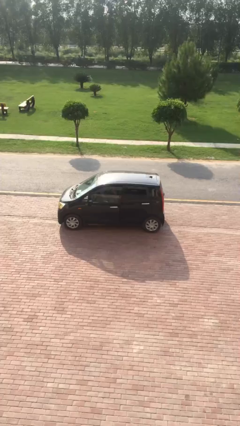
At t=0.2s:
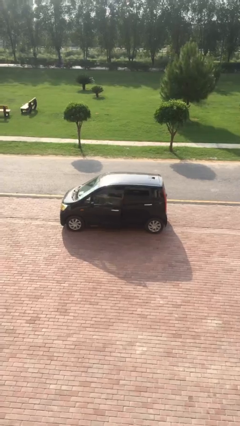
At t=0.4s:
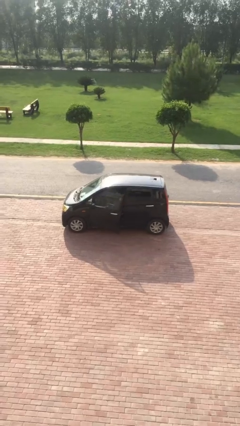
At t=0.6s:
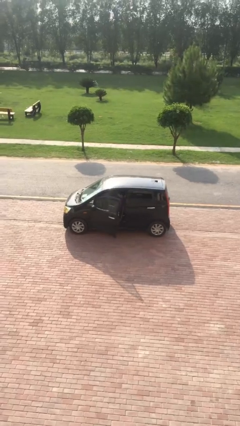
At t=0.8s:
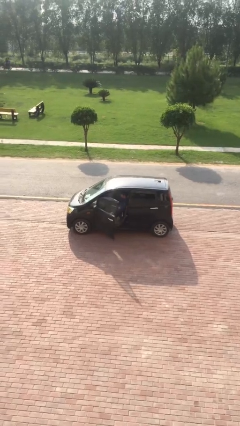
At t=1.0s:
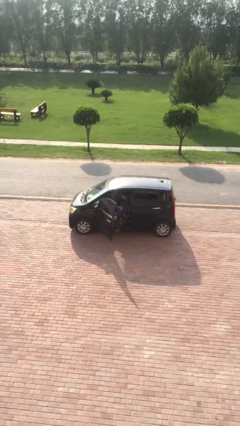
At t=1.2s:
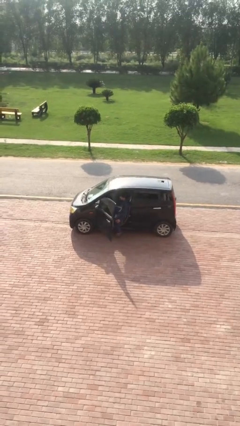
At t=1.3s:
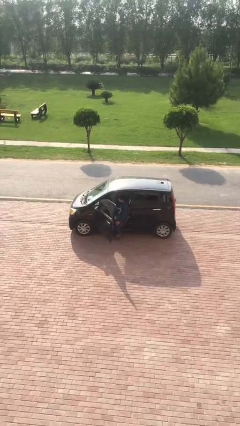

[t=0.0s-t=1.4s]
person opens car door

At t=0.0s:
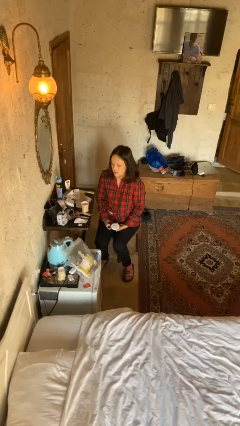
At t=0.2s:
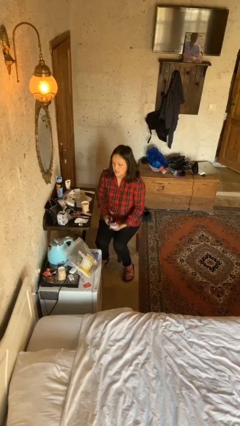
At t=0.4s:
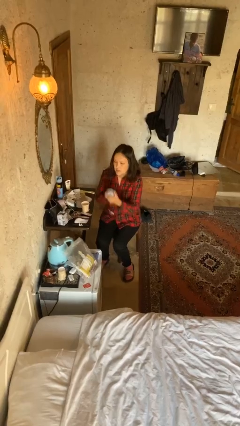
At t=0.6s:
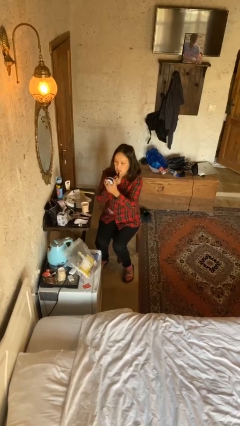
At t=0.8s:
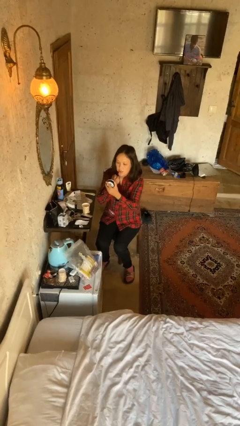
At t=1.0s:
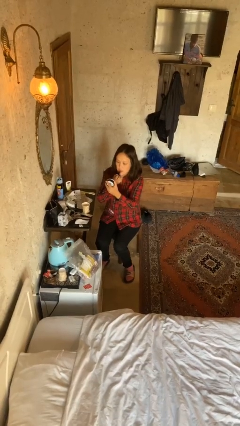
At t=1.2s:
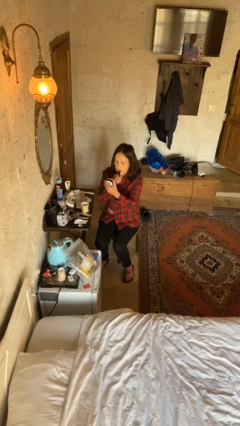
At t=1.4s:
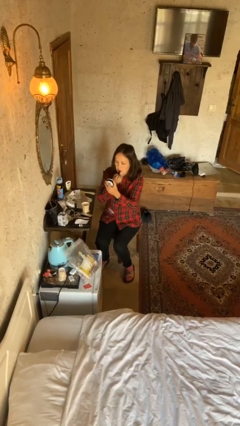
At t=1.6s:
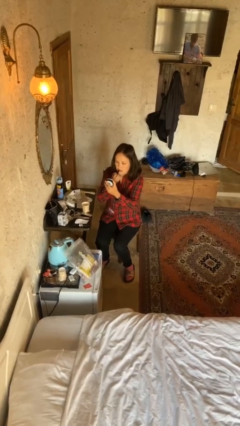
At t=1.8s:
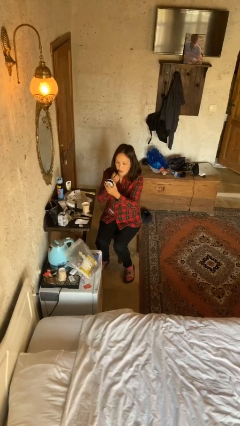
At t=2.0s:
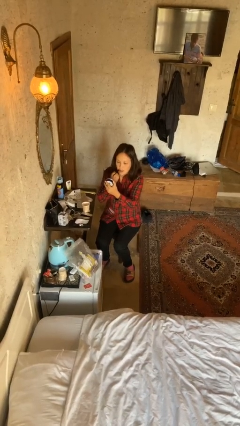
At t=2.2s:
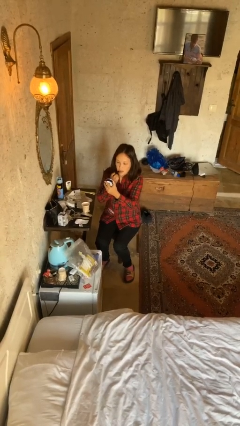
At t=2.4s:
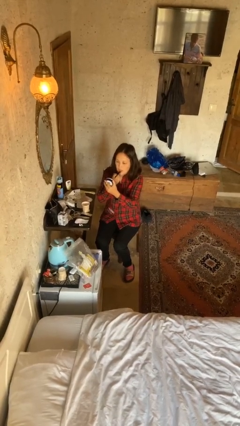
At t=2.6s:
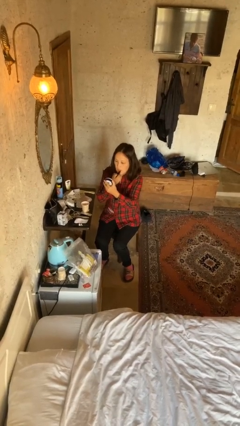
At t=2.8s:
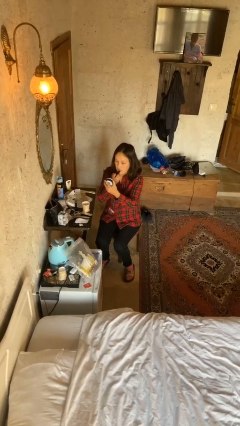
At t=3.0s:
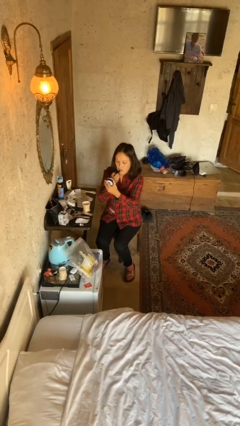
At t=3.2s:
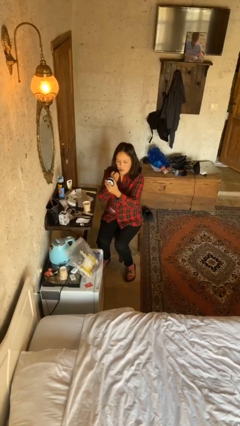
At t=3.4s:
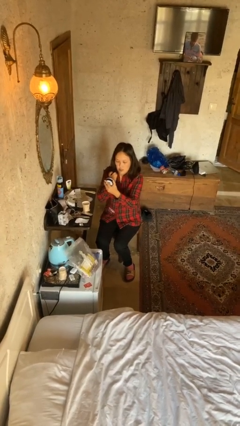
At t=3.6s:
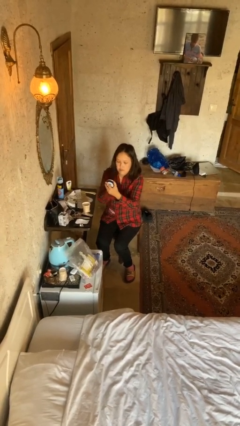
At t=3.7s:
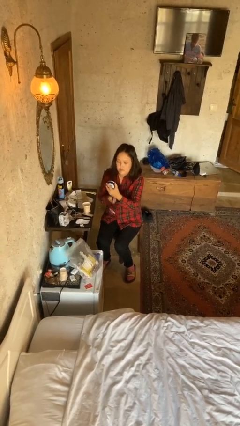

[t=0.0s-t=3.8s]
person applies lip makeup

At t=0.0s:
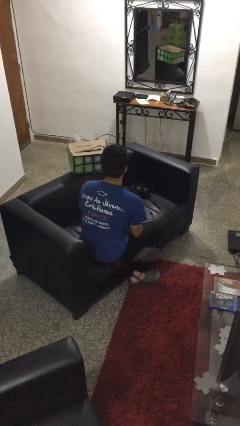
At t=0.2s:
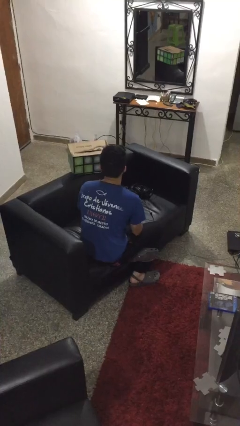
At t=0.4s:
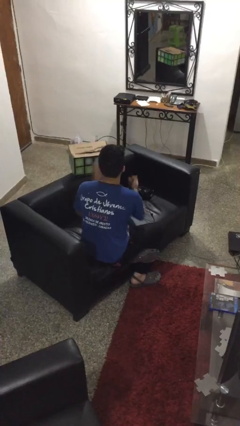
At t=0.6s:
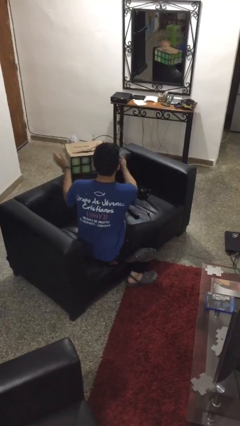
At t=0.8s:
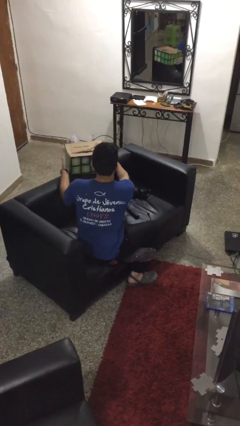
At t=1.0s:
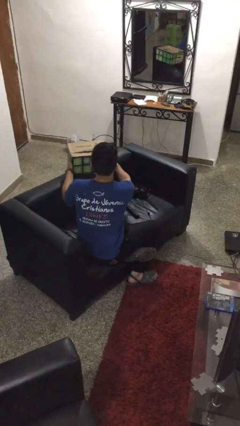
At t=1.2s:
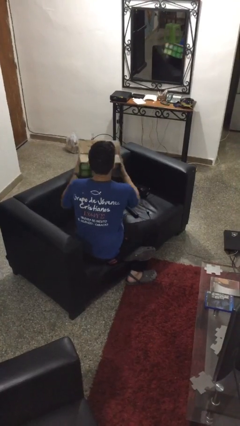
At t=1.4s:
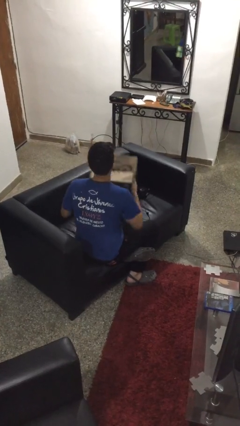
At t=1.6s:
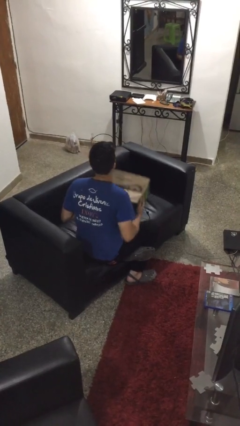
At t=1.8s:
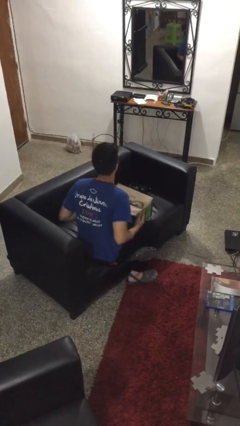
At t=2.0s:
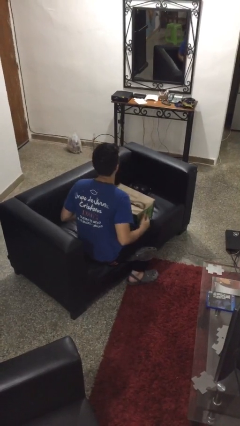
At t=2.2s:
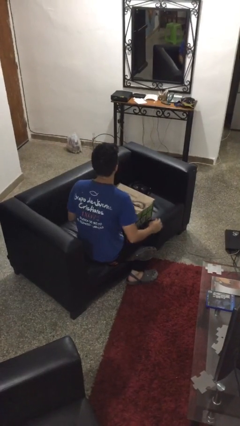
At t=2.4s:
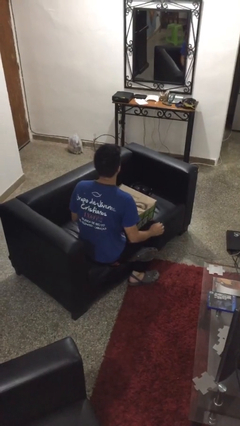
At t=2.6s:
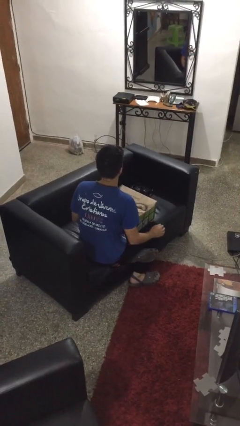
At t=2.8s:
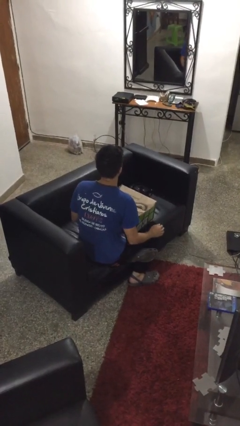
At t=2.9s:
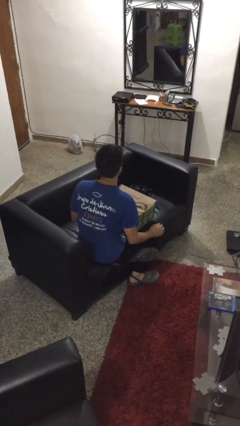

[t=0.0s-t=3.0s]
person picks up object from couch

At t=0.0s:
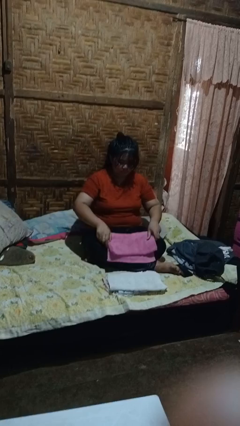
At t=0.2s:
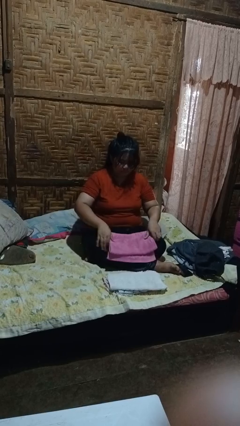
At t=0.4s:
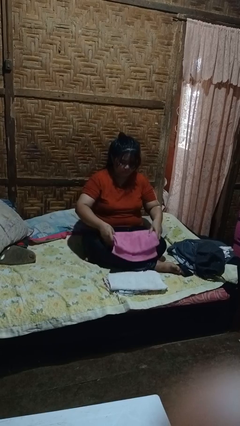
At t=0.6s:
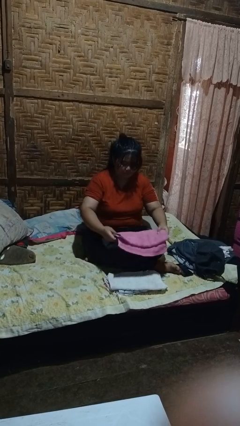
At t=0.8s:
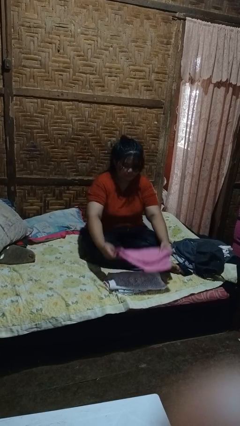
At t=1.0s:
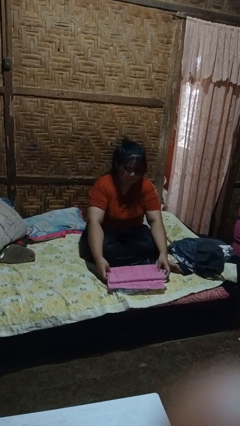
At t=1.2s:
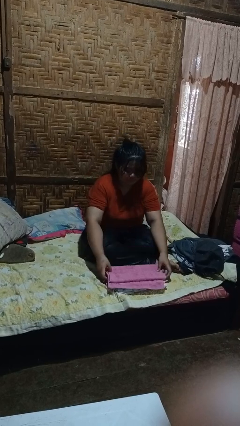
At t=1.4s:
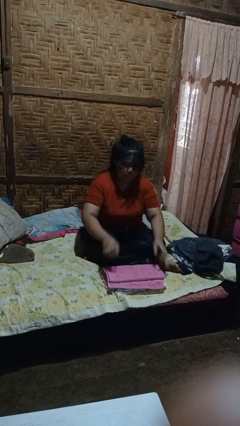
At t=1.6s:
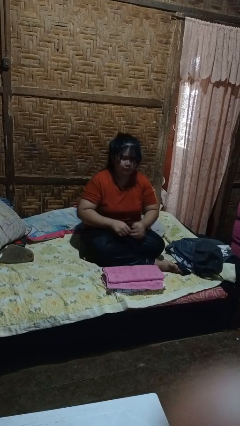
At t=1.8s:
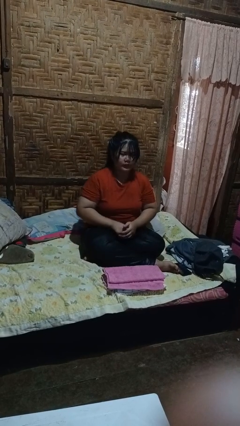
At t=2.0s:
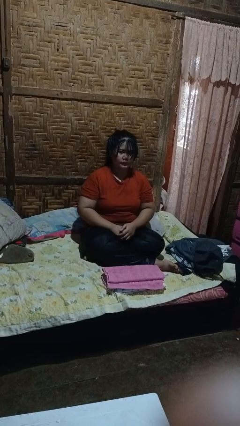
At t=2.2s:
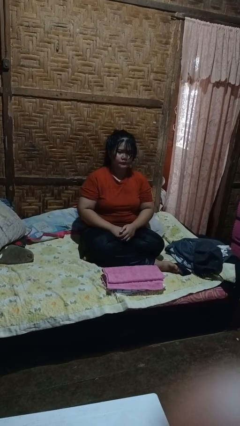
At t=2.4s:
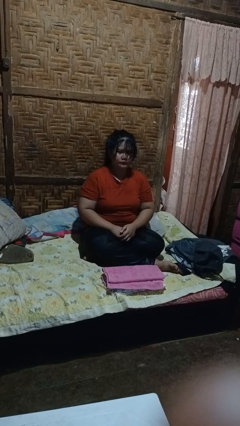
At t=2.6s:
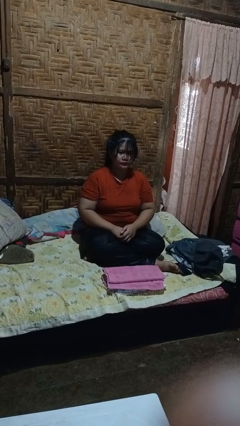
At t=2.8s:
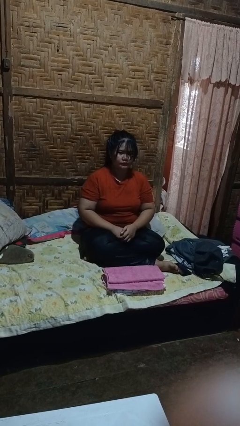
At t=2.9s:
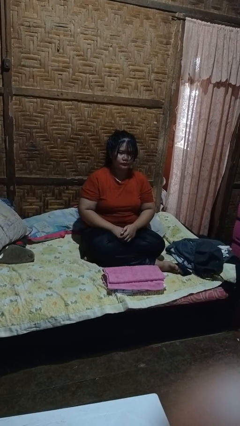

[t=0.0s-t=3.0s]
person folds towel

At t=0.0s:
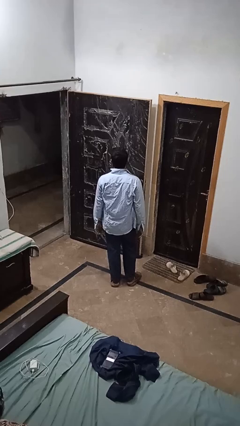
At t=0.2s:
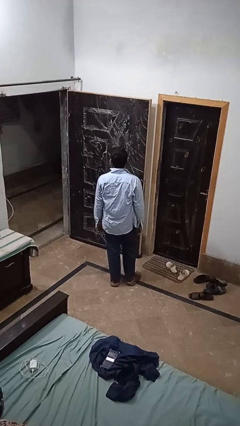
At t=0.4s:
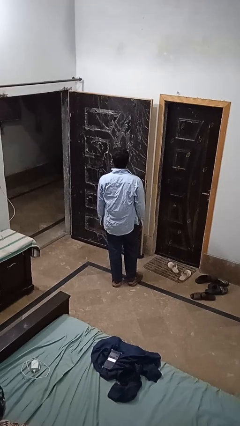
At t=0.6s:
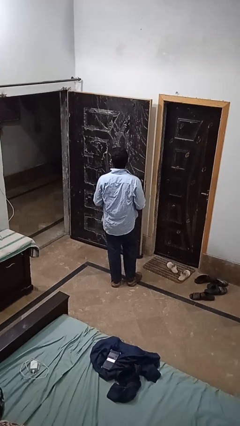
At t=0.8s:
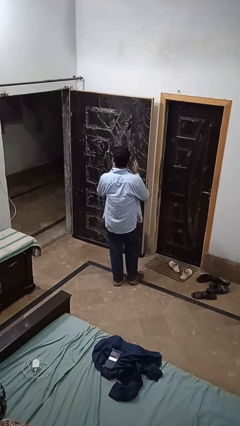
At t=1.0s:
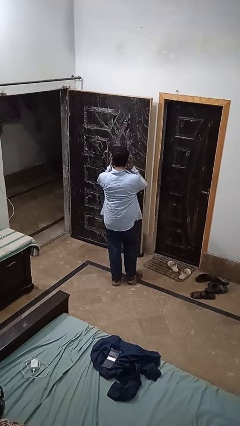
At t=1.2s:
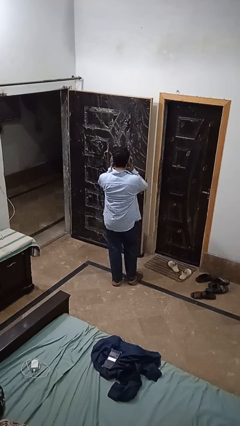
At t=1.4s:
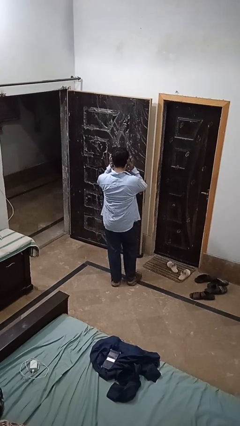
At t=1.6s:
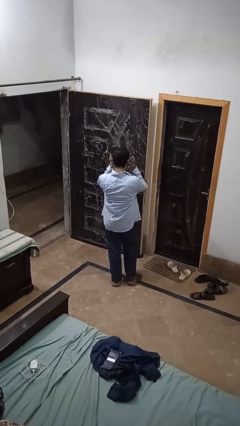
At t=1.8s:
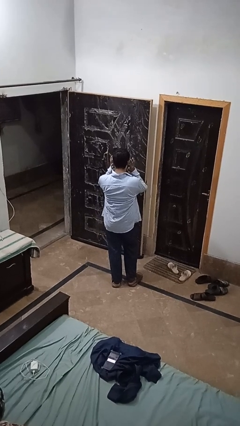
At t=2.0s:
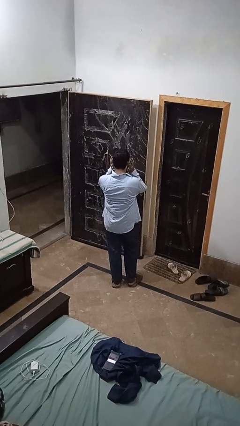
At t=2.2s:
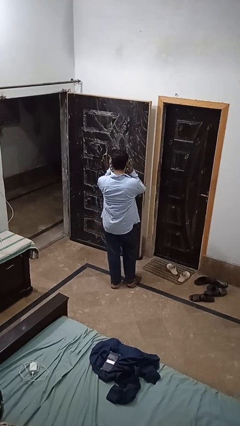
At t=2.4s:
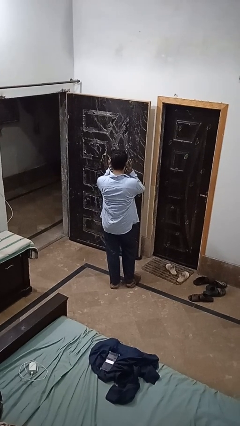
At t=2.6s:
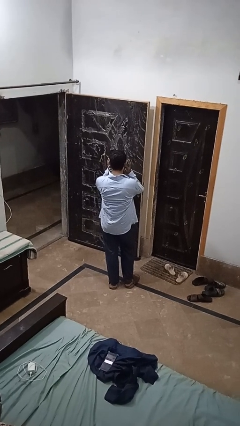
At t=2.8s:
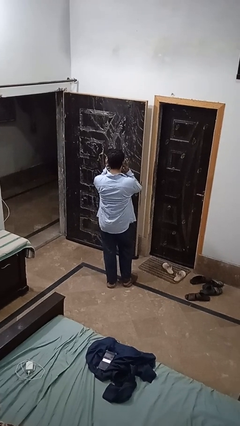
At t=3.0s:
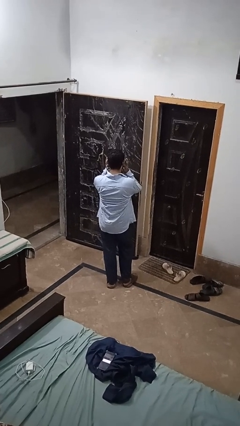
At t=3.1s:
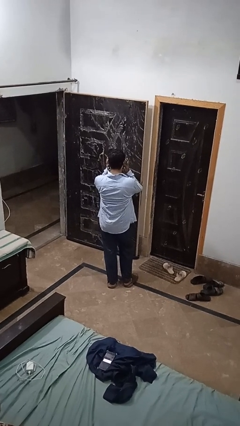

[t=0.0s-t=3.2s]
person puts fingers in ear

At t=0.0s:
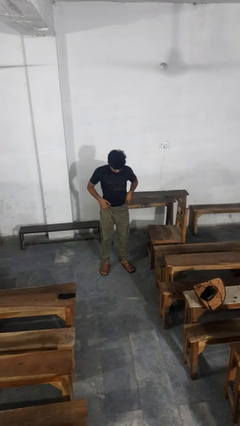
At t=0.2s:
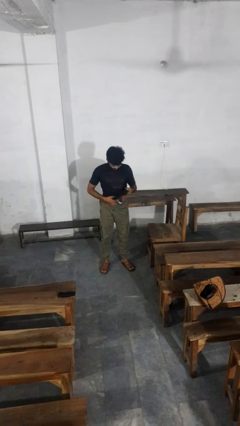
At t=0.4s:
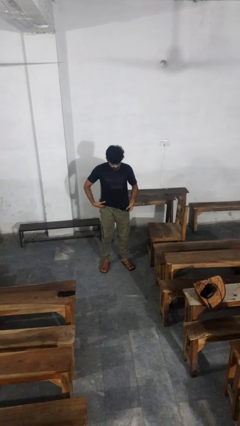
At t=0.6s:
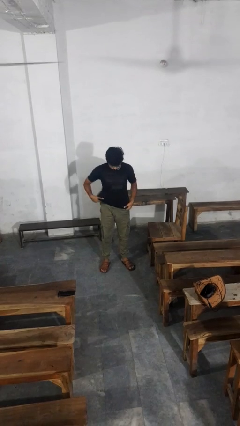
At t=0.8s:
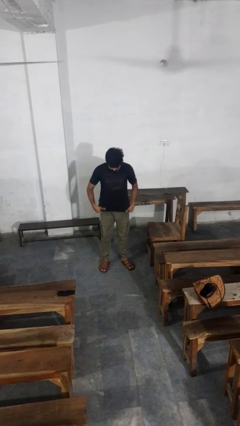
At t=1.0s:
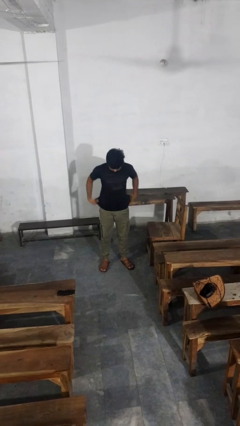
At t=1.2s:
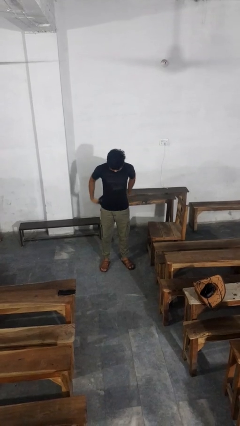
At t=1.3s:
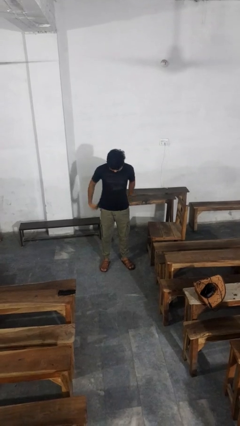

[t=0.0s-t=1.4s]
person untucks shirt

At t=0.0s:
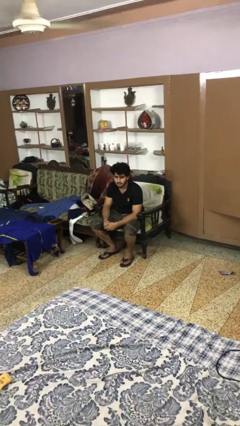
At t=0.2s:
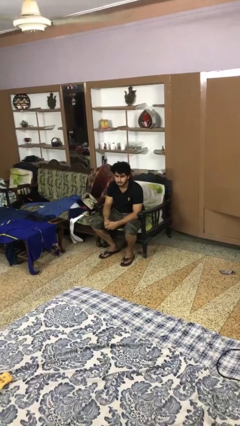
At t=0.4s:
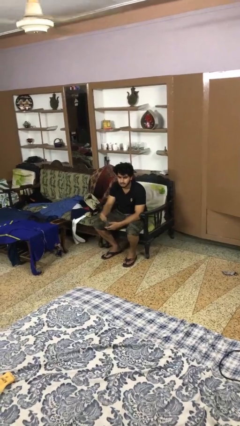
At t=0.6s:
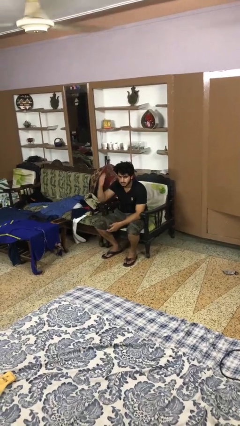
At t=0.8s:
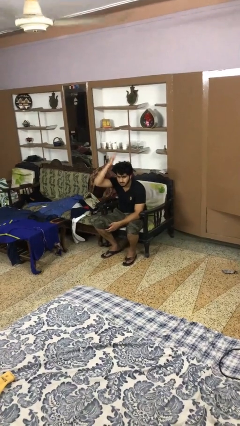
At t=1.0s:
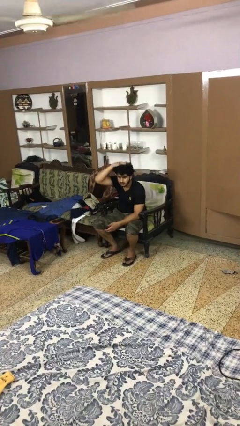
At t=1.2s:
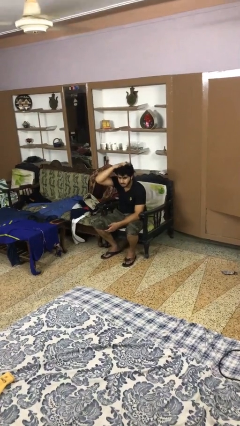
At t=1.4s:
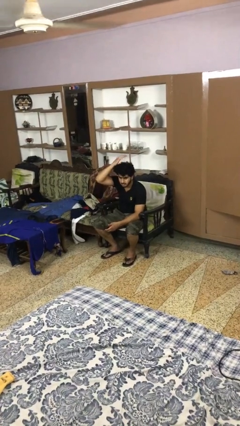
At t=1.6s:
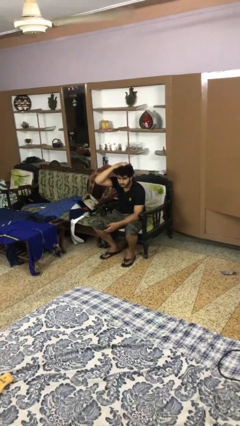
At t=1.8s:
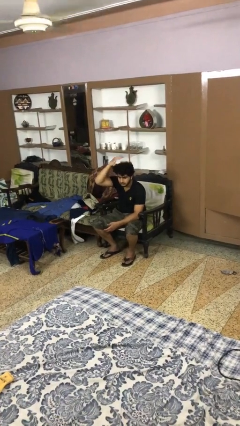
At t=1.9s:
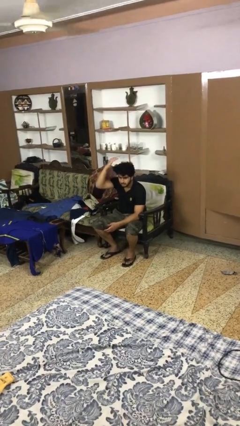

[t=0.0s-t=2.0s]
person pats head
